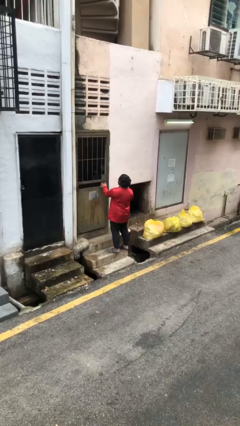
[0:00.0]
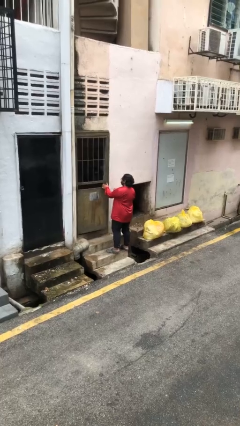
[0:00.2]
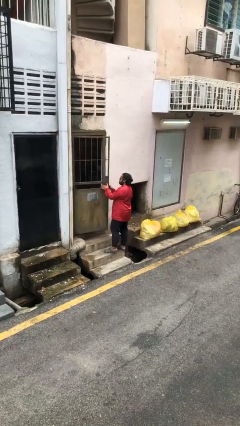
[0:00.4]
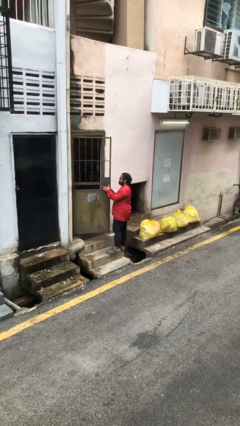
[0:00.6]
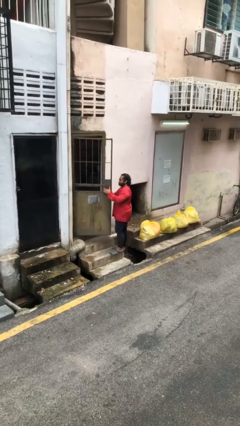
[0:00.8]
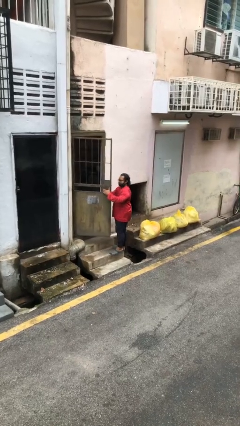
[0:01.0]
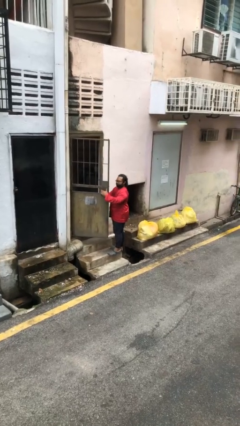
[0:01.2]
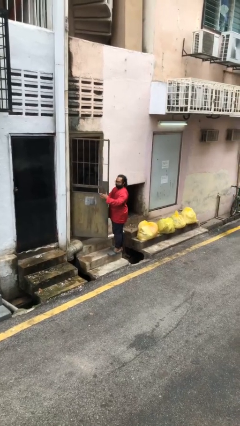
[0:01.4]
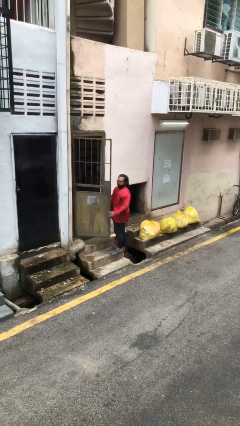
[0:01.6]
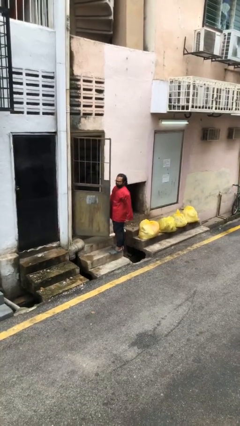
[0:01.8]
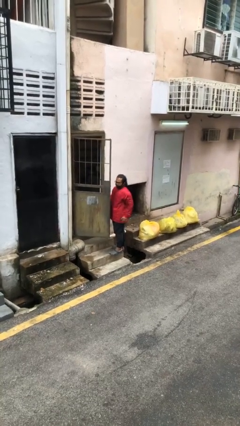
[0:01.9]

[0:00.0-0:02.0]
person opens facility door

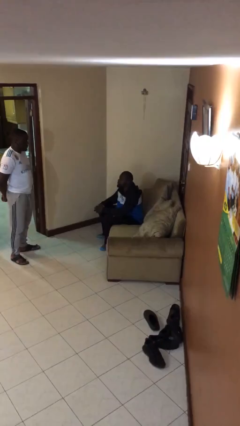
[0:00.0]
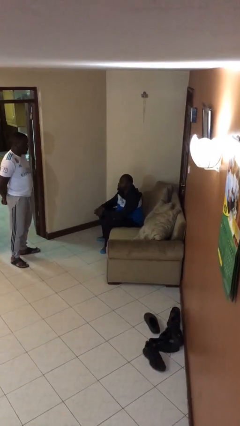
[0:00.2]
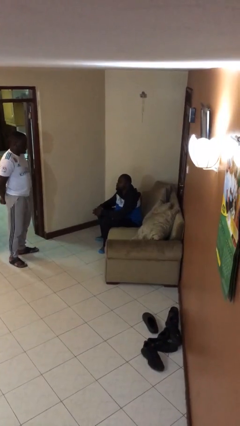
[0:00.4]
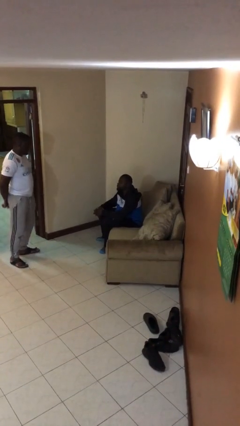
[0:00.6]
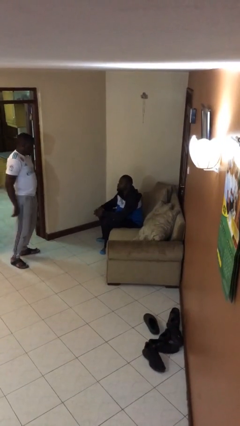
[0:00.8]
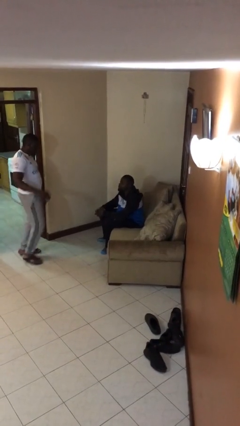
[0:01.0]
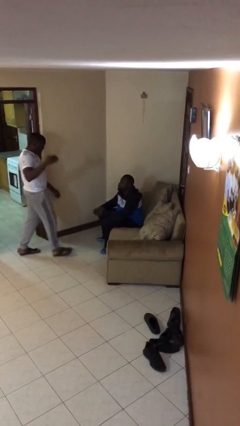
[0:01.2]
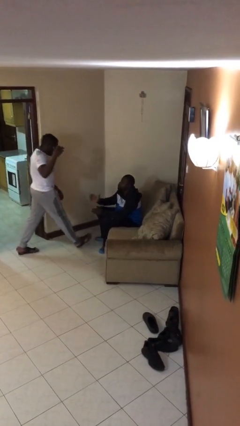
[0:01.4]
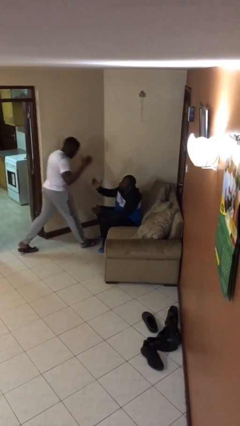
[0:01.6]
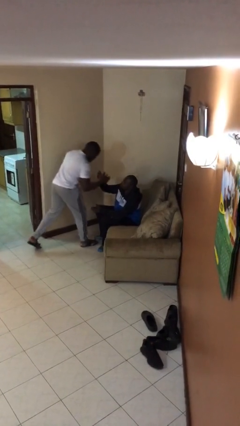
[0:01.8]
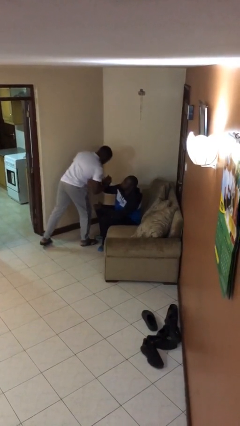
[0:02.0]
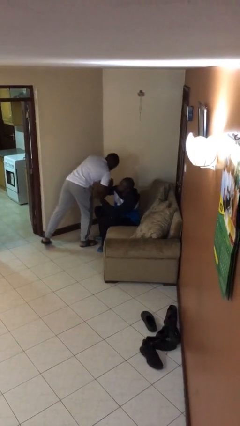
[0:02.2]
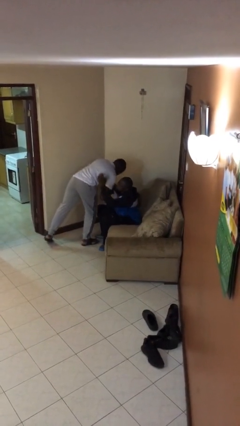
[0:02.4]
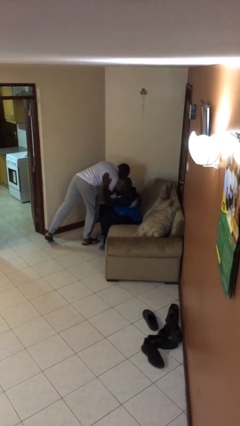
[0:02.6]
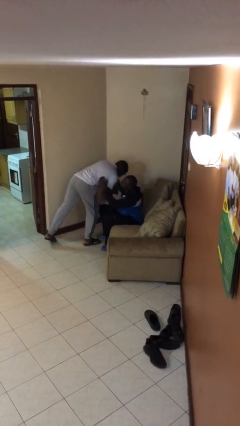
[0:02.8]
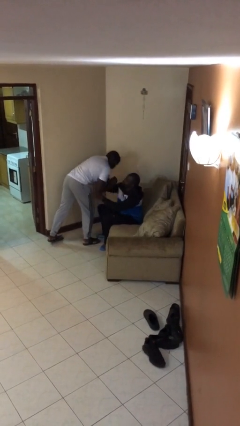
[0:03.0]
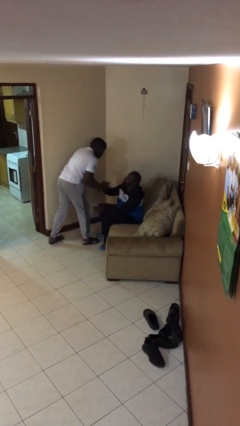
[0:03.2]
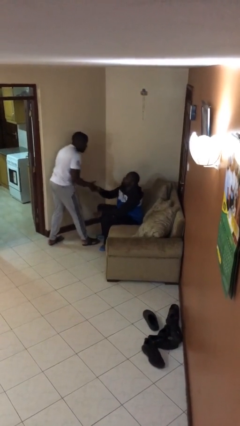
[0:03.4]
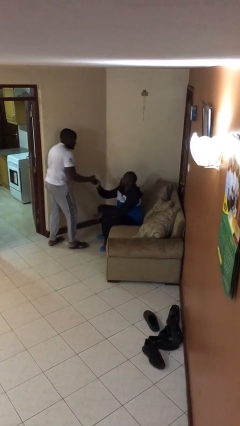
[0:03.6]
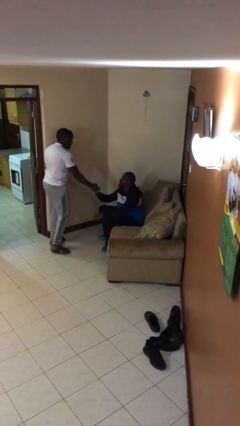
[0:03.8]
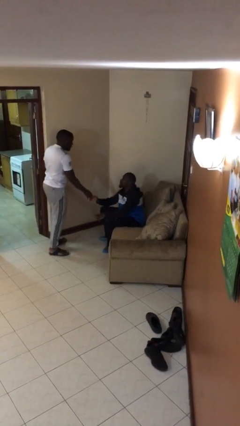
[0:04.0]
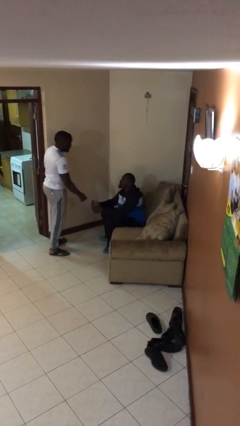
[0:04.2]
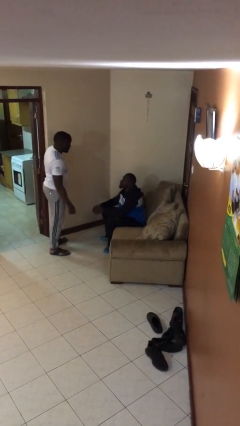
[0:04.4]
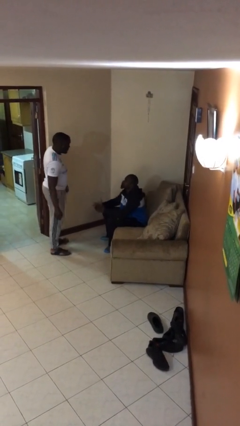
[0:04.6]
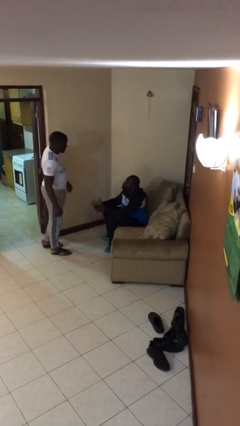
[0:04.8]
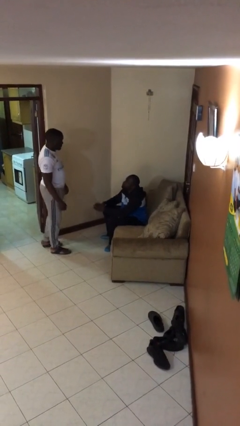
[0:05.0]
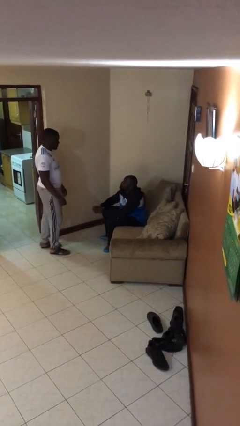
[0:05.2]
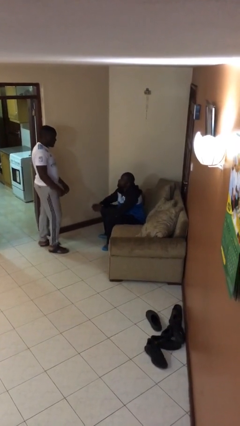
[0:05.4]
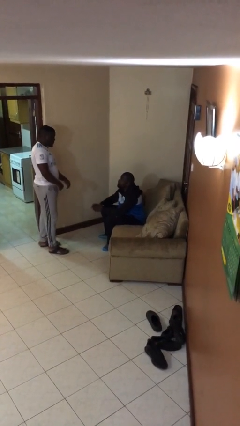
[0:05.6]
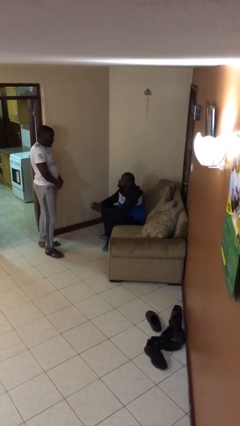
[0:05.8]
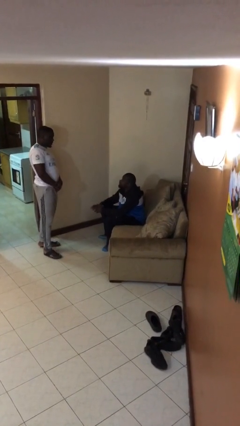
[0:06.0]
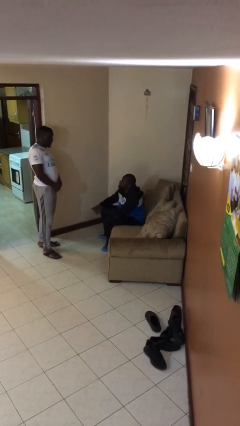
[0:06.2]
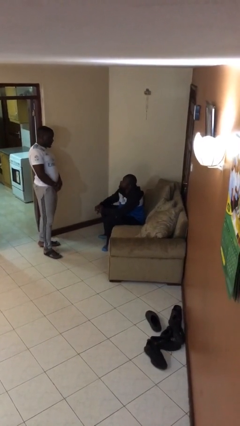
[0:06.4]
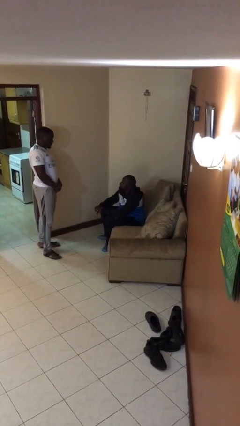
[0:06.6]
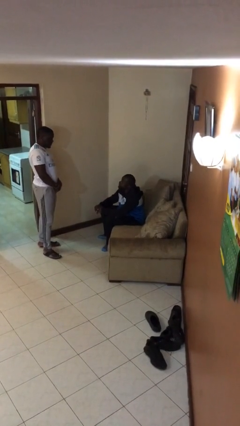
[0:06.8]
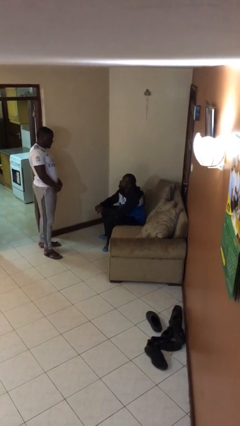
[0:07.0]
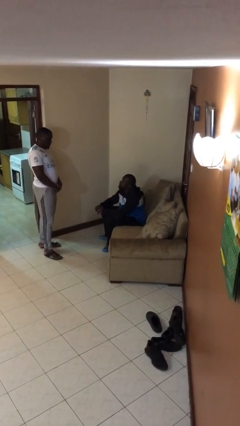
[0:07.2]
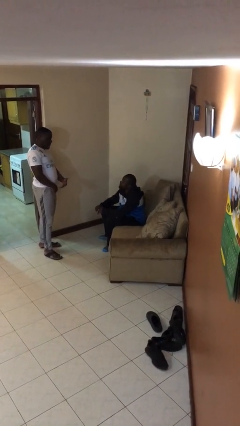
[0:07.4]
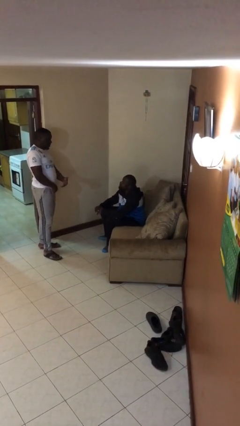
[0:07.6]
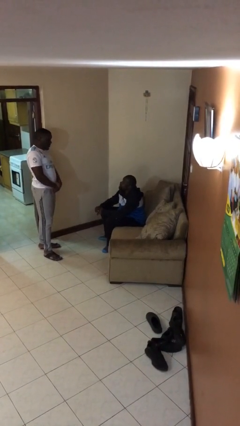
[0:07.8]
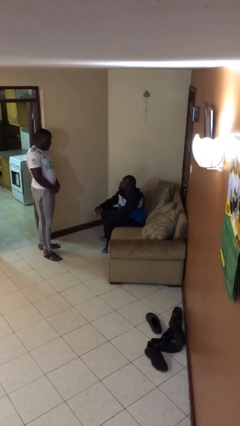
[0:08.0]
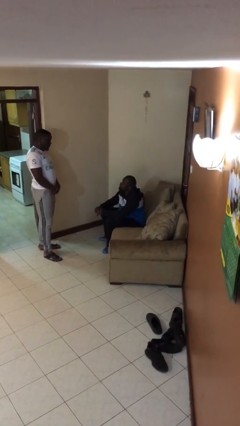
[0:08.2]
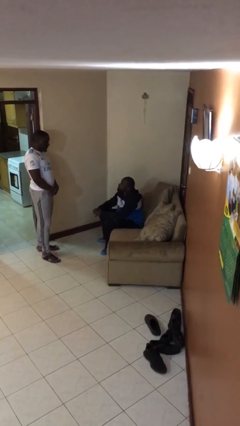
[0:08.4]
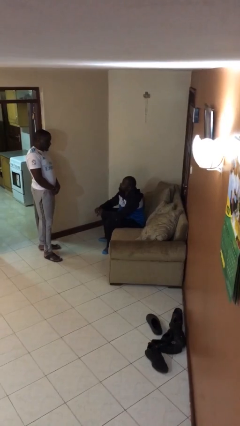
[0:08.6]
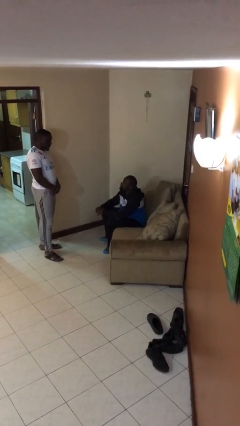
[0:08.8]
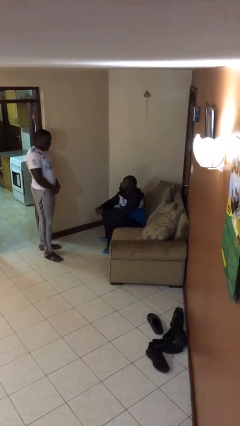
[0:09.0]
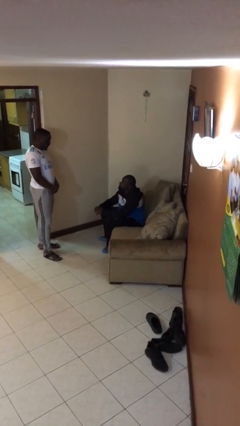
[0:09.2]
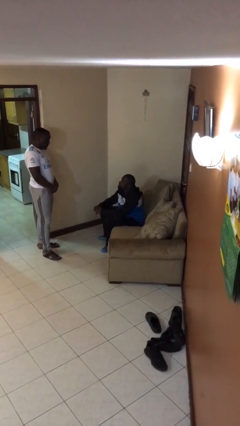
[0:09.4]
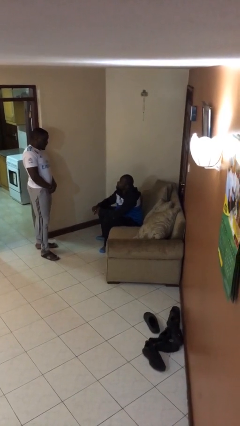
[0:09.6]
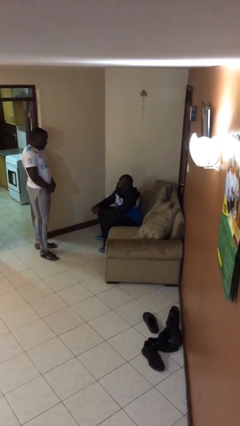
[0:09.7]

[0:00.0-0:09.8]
person embraces person

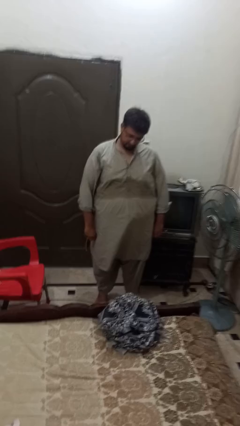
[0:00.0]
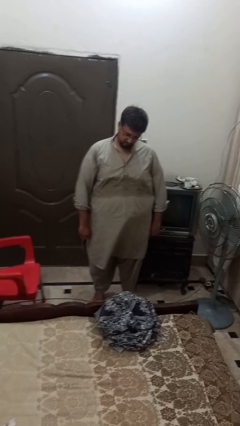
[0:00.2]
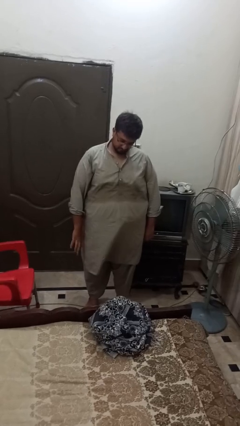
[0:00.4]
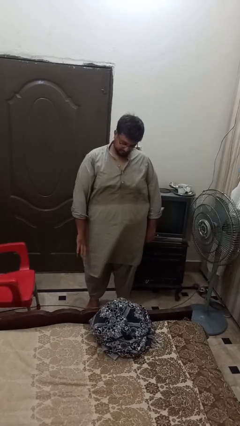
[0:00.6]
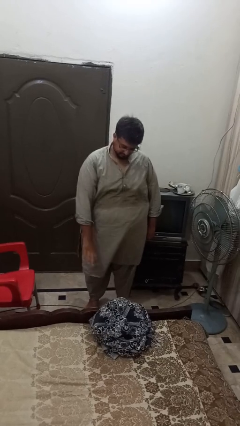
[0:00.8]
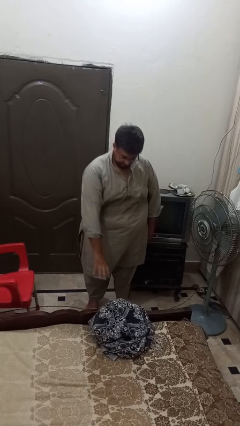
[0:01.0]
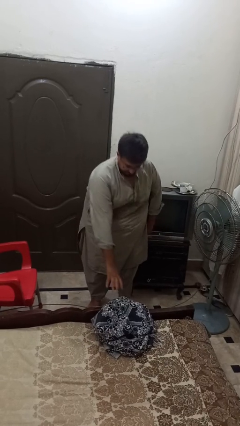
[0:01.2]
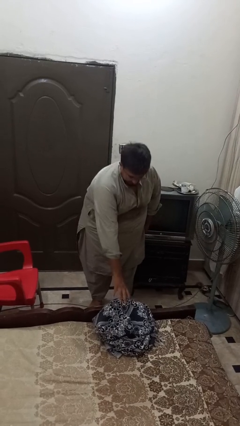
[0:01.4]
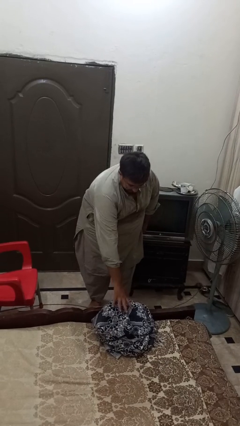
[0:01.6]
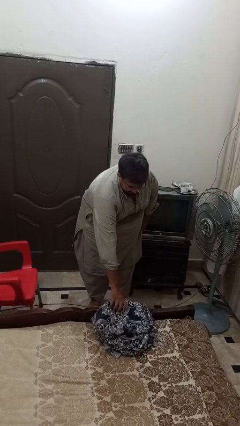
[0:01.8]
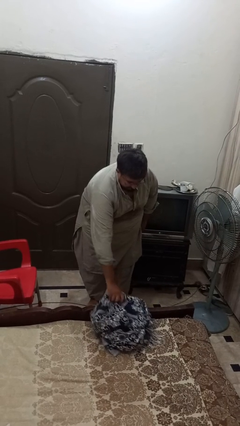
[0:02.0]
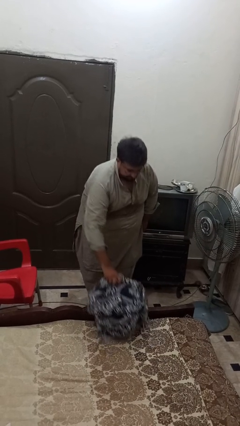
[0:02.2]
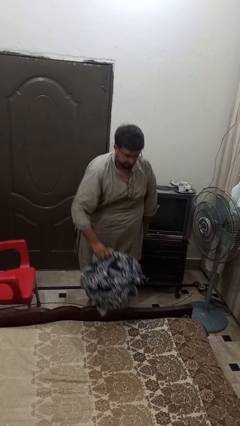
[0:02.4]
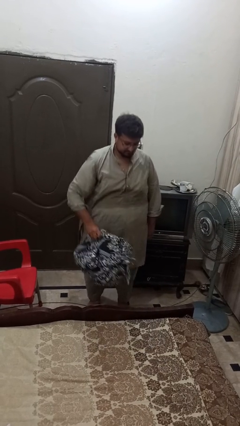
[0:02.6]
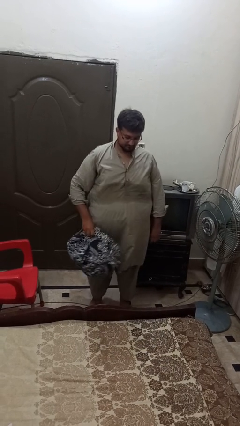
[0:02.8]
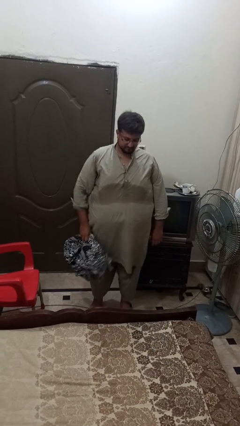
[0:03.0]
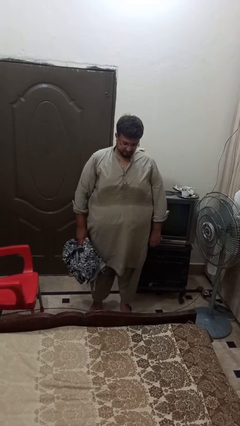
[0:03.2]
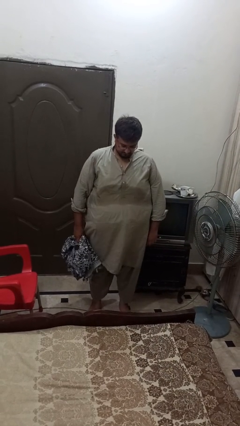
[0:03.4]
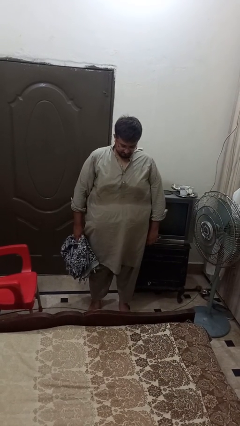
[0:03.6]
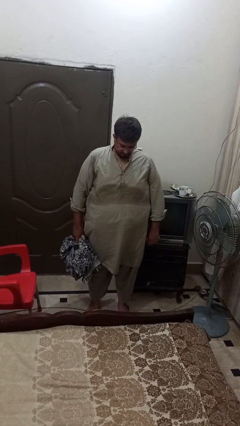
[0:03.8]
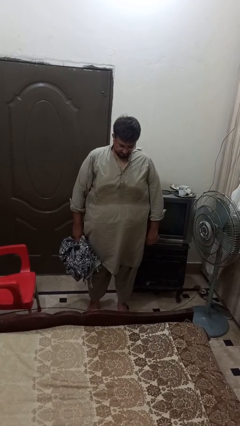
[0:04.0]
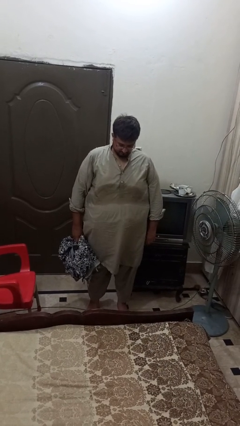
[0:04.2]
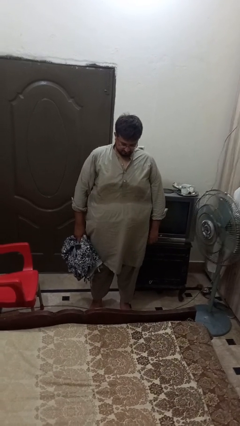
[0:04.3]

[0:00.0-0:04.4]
person picks up object from bed

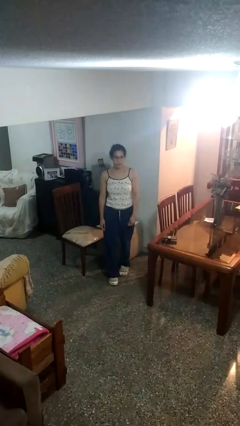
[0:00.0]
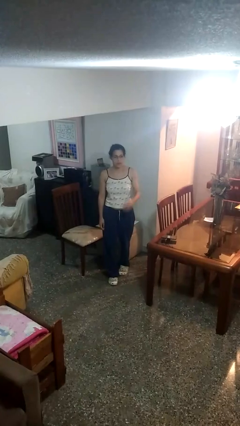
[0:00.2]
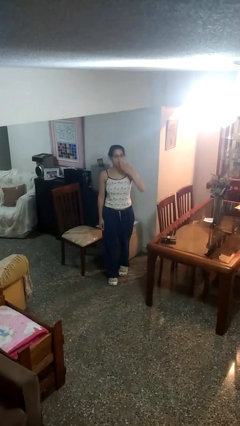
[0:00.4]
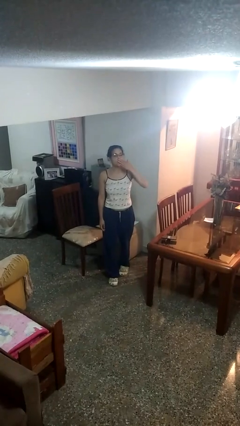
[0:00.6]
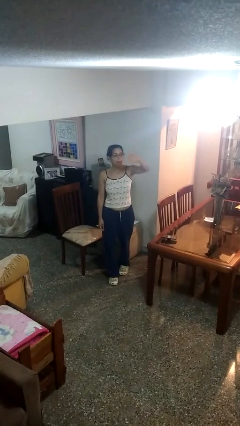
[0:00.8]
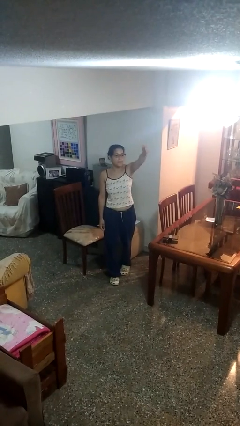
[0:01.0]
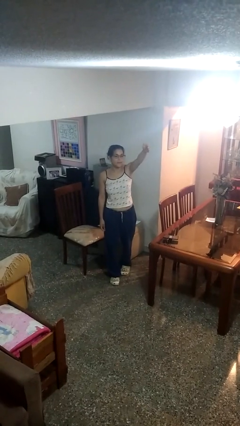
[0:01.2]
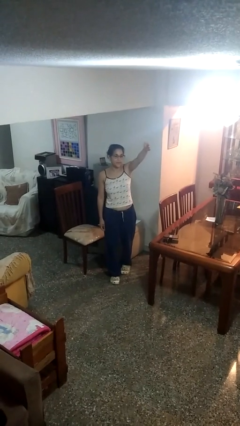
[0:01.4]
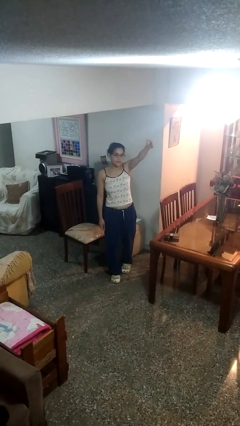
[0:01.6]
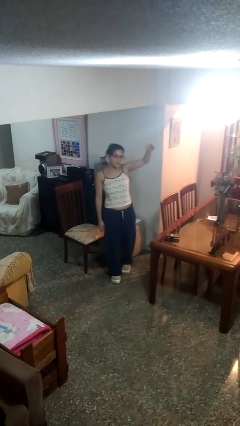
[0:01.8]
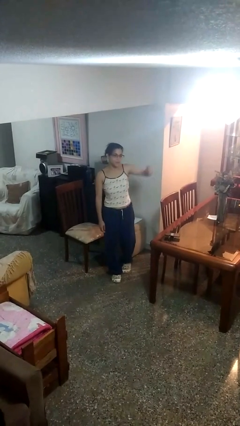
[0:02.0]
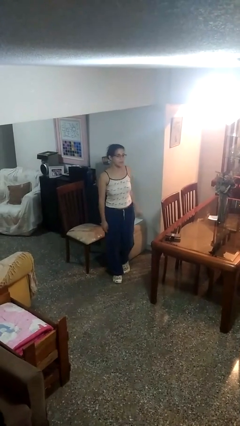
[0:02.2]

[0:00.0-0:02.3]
person gestures blow kiss
